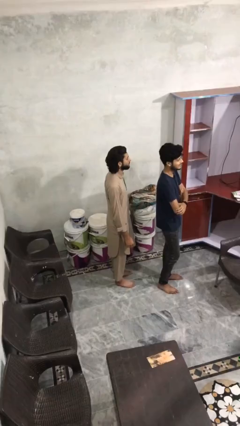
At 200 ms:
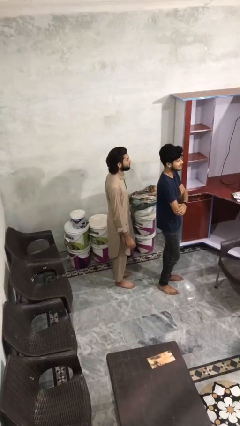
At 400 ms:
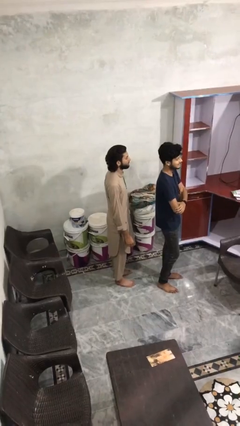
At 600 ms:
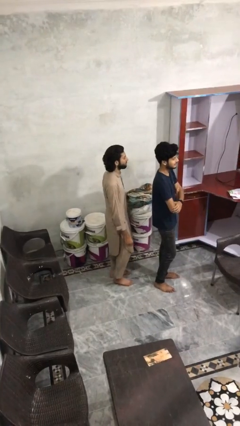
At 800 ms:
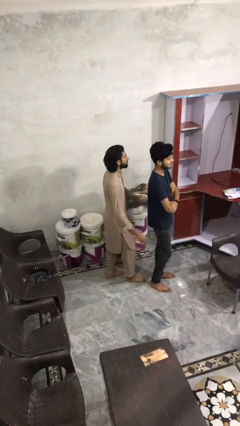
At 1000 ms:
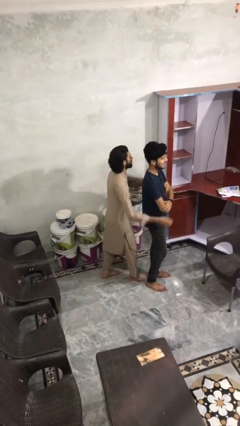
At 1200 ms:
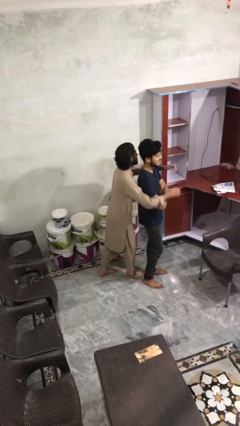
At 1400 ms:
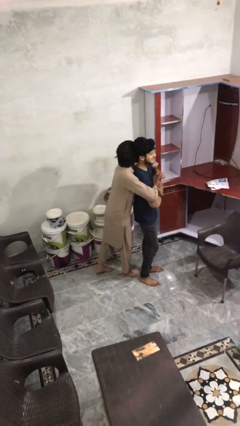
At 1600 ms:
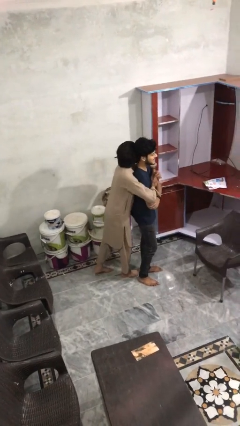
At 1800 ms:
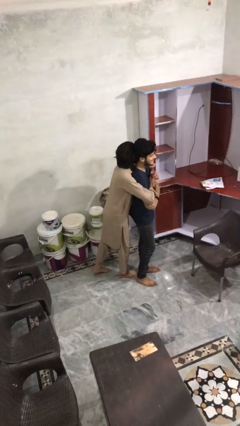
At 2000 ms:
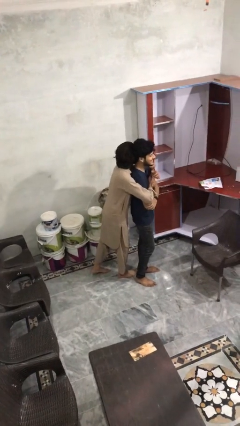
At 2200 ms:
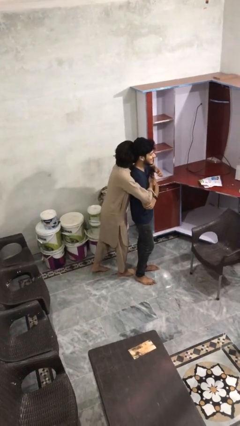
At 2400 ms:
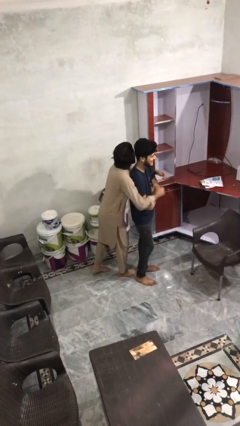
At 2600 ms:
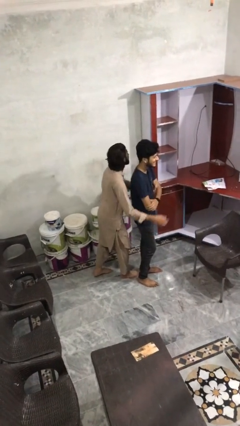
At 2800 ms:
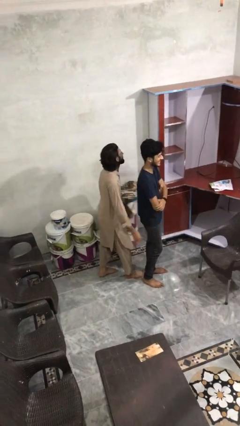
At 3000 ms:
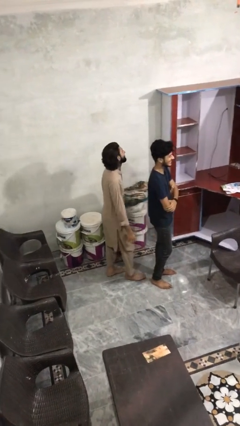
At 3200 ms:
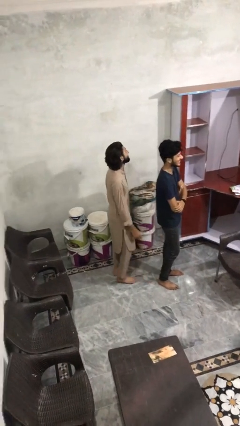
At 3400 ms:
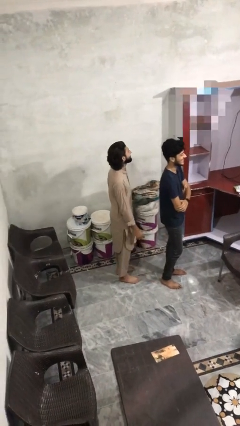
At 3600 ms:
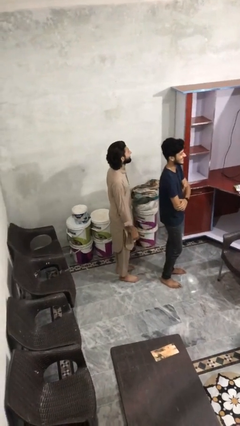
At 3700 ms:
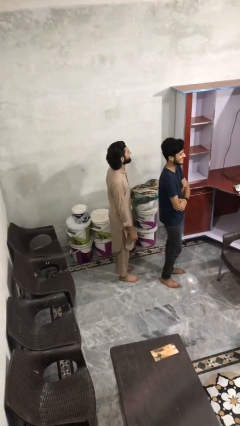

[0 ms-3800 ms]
person hugs person from behind

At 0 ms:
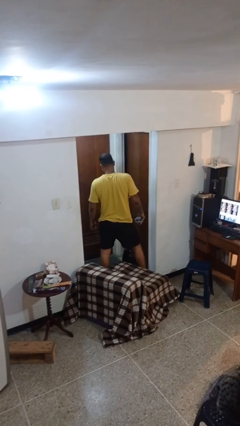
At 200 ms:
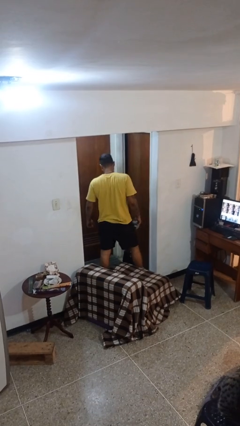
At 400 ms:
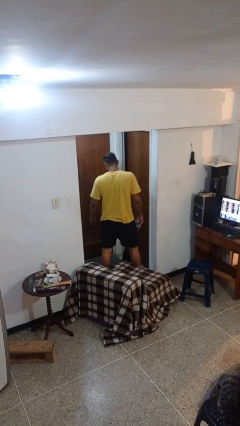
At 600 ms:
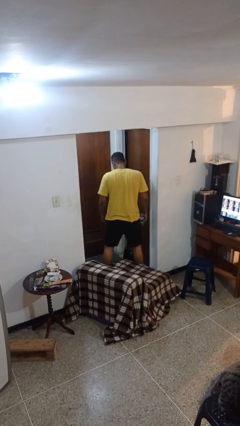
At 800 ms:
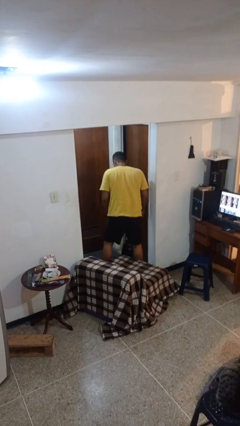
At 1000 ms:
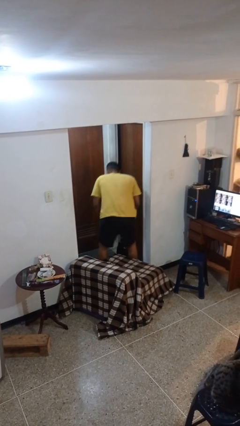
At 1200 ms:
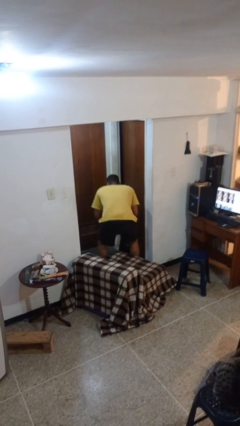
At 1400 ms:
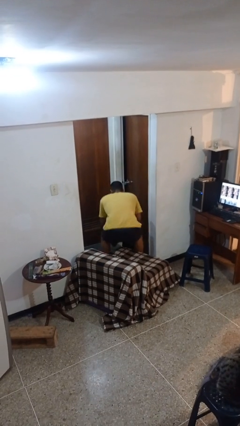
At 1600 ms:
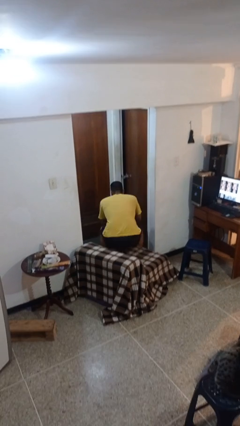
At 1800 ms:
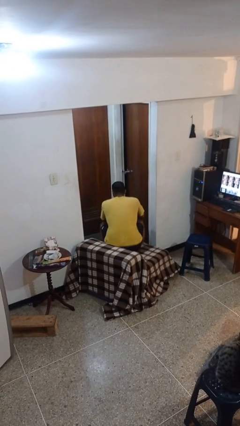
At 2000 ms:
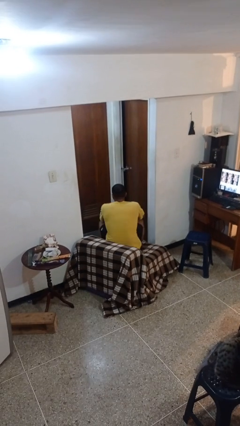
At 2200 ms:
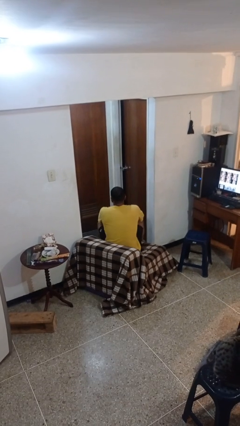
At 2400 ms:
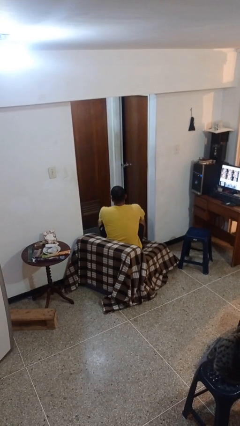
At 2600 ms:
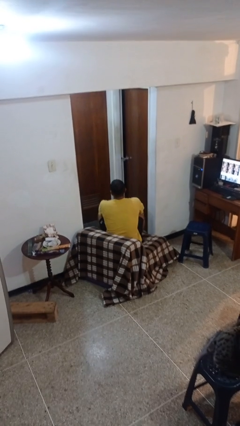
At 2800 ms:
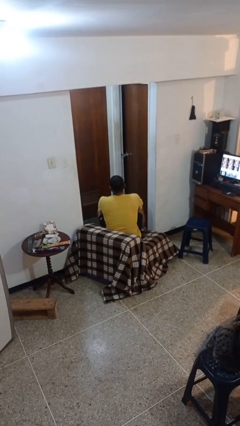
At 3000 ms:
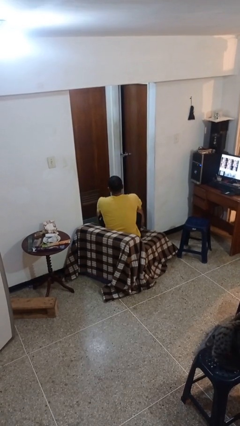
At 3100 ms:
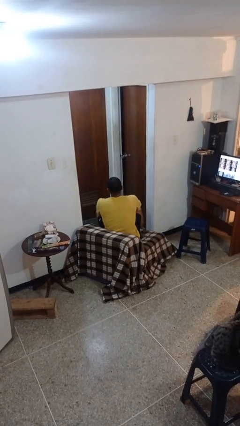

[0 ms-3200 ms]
person lies down on couch

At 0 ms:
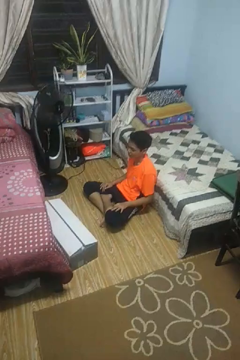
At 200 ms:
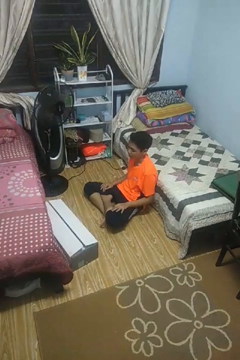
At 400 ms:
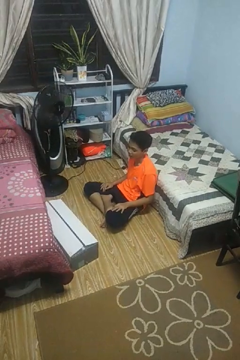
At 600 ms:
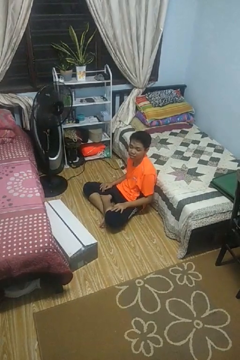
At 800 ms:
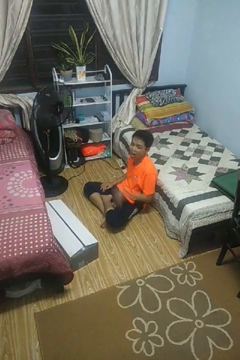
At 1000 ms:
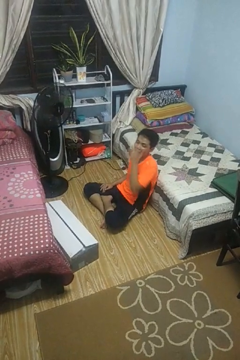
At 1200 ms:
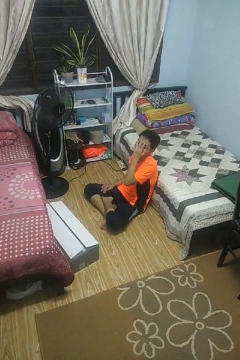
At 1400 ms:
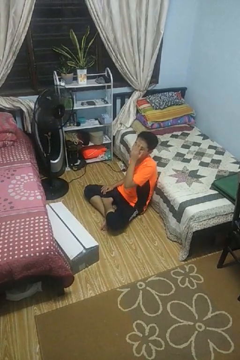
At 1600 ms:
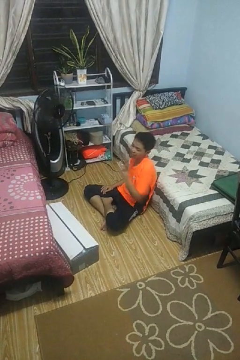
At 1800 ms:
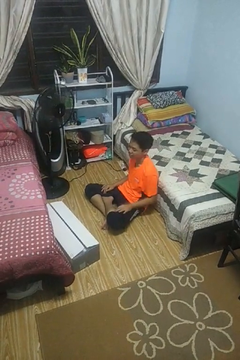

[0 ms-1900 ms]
person covers face with hands

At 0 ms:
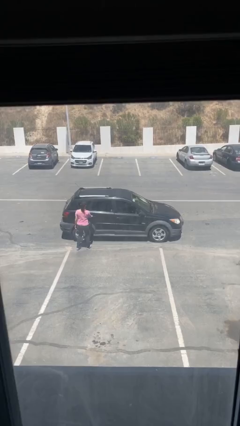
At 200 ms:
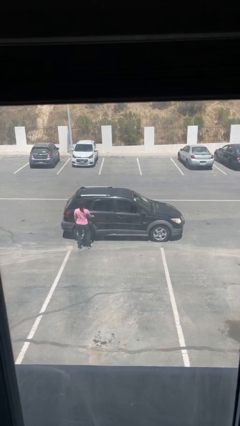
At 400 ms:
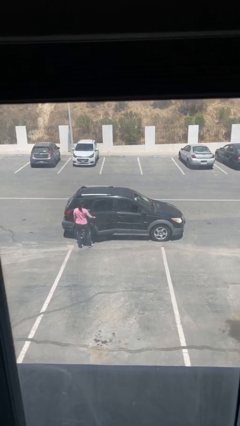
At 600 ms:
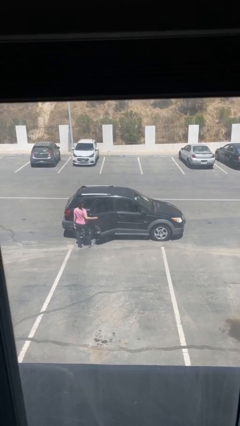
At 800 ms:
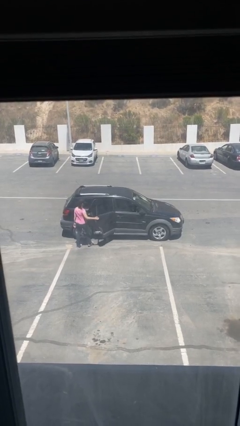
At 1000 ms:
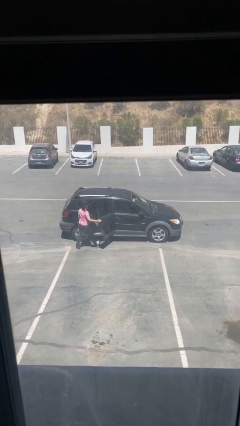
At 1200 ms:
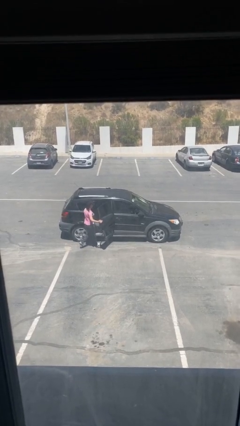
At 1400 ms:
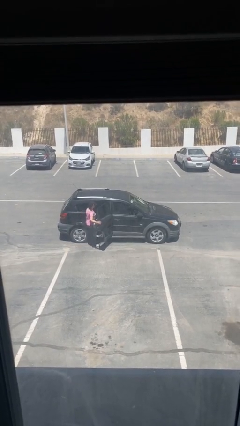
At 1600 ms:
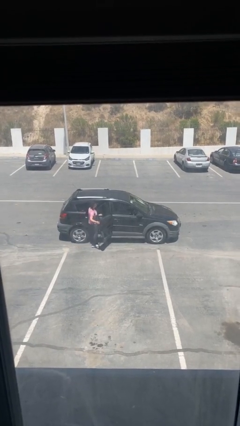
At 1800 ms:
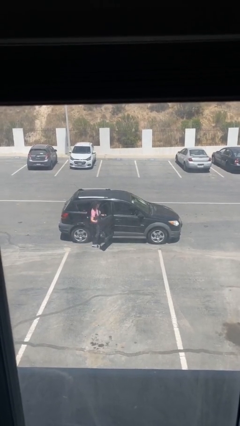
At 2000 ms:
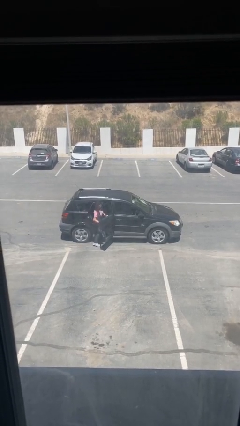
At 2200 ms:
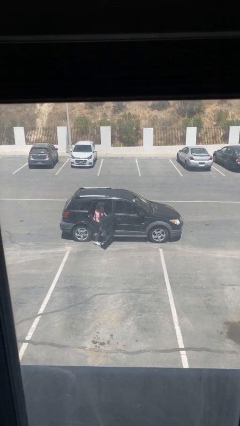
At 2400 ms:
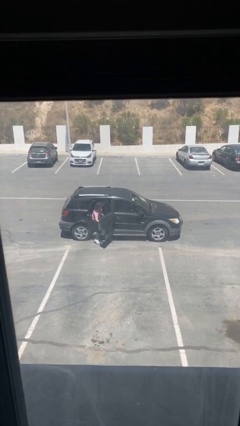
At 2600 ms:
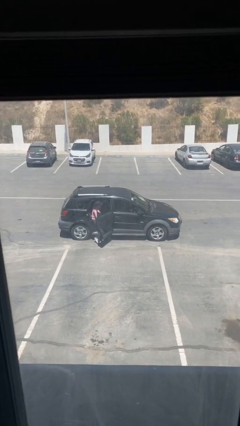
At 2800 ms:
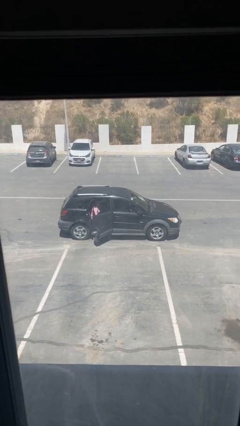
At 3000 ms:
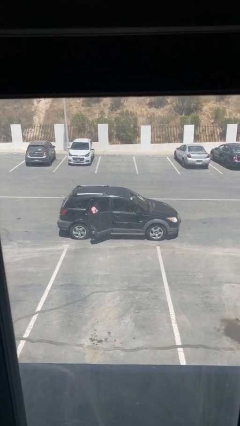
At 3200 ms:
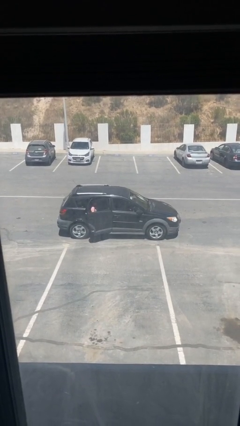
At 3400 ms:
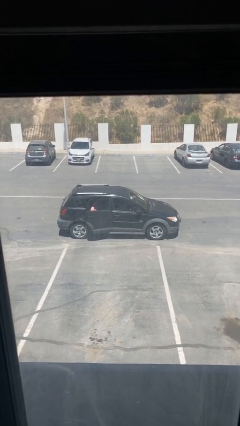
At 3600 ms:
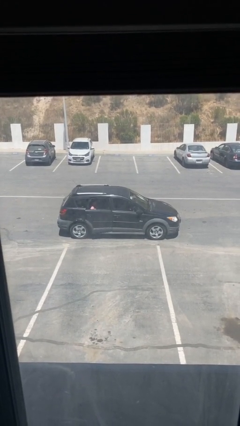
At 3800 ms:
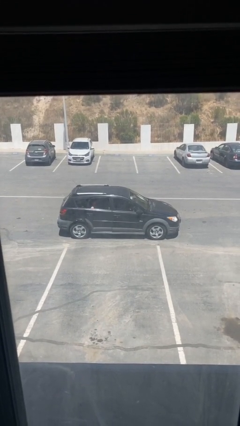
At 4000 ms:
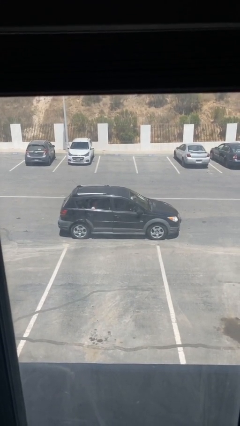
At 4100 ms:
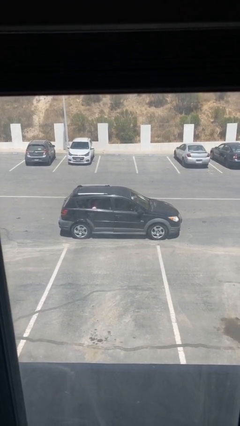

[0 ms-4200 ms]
car picks up person

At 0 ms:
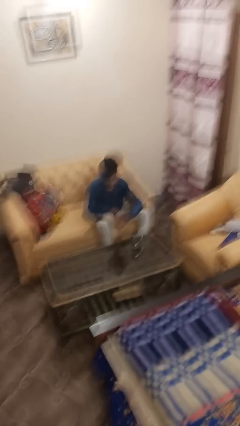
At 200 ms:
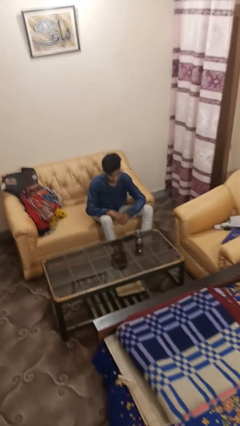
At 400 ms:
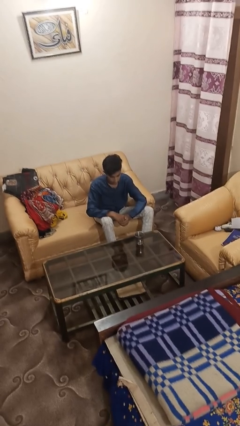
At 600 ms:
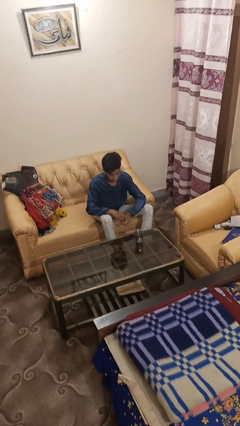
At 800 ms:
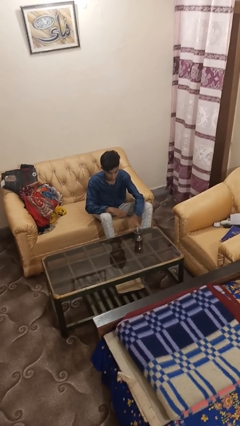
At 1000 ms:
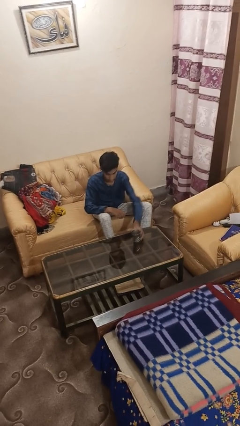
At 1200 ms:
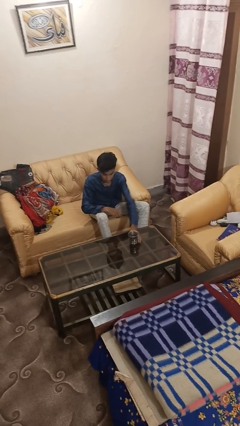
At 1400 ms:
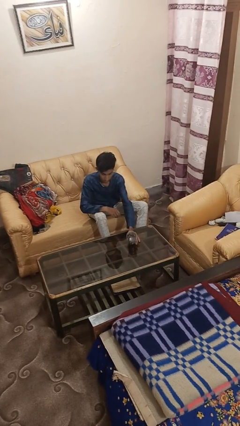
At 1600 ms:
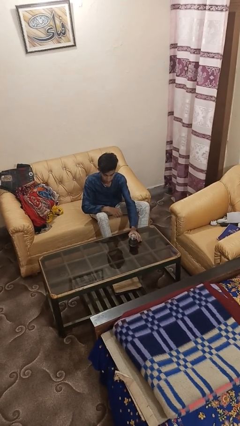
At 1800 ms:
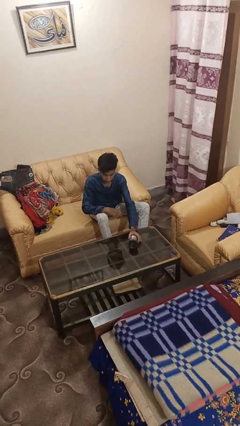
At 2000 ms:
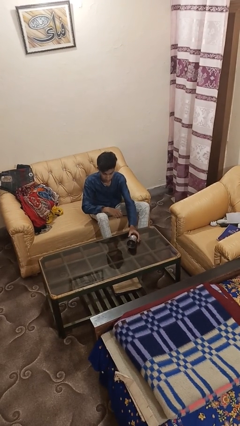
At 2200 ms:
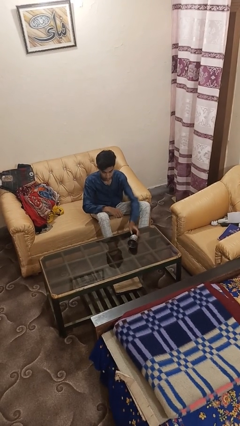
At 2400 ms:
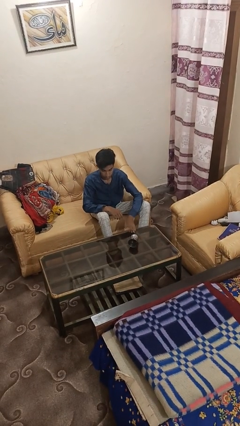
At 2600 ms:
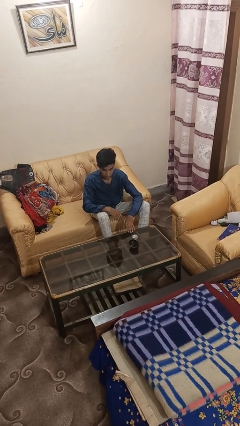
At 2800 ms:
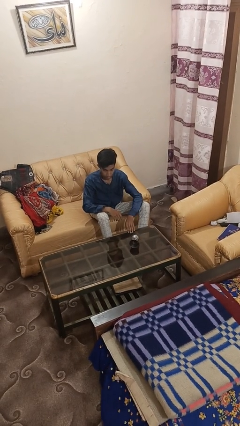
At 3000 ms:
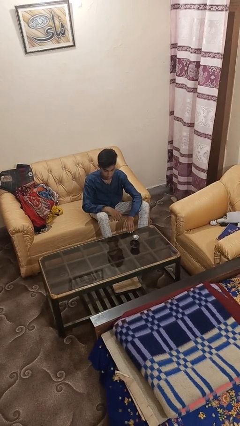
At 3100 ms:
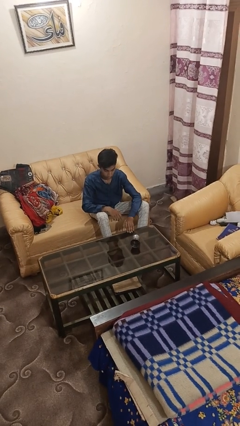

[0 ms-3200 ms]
person knocks over glass

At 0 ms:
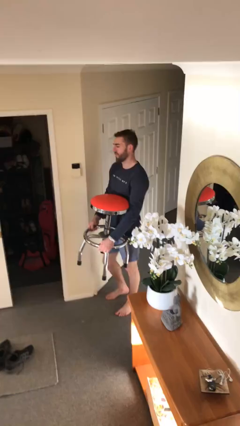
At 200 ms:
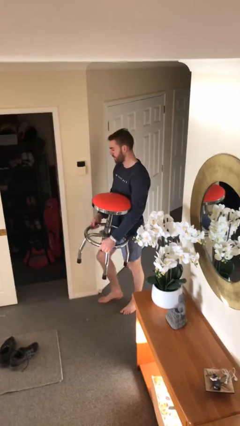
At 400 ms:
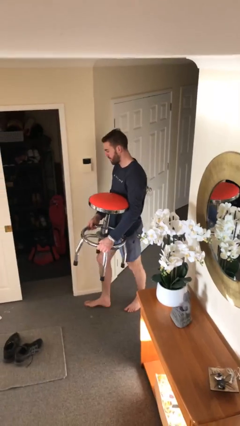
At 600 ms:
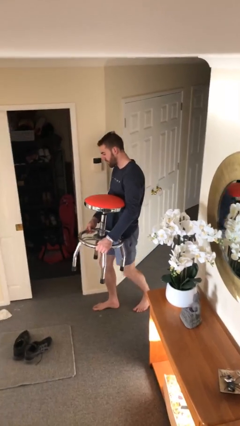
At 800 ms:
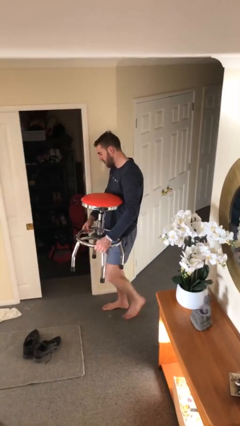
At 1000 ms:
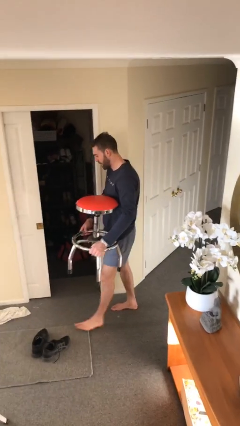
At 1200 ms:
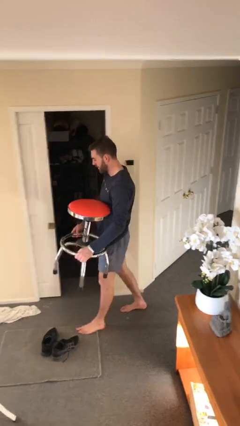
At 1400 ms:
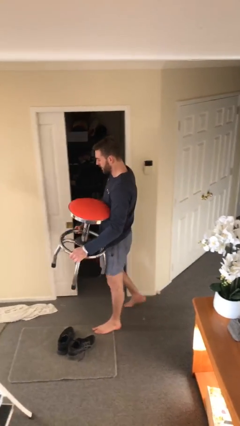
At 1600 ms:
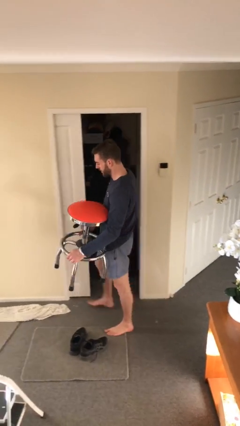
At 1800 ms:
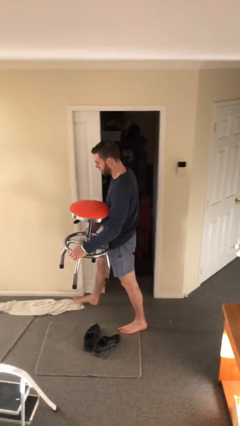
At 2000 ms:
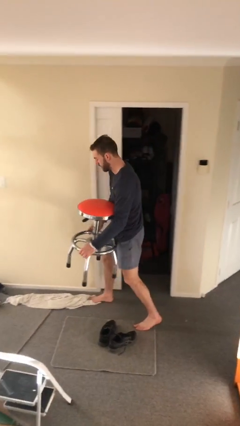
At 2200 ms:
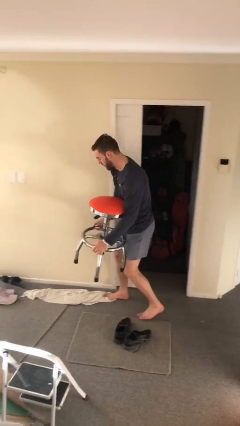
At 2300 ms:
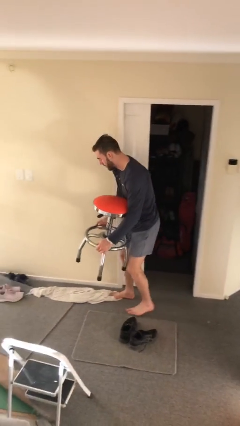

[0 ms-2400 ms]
person carries heavy object
